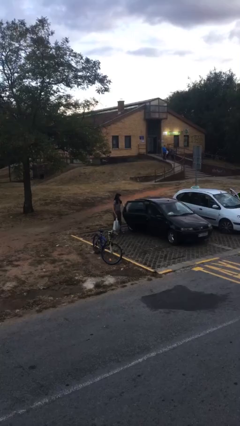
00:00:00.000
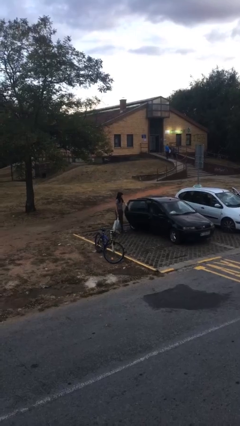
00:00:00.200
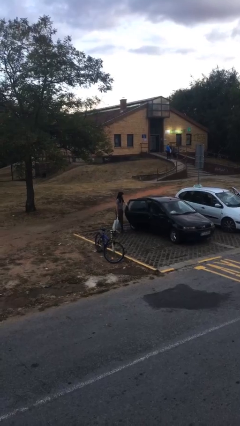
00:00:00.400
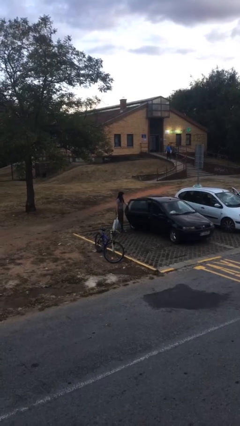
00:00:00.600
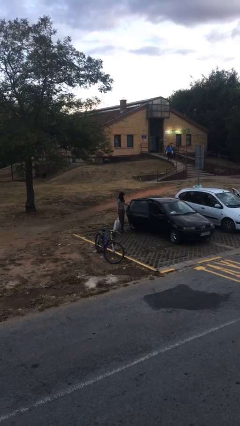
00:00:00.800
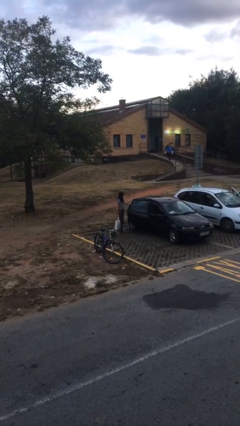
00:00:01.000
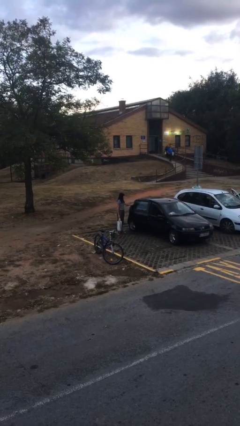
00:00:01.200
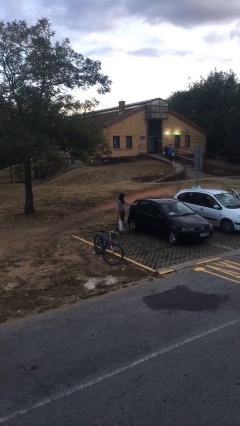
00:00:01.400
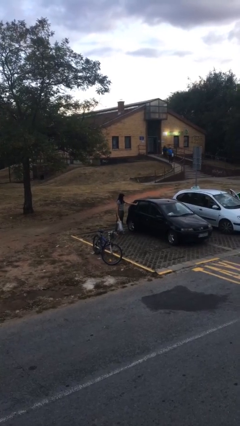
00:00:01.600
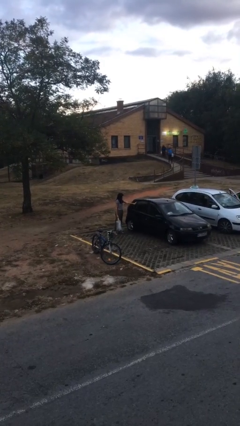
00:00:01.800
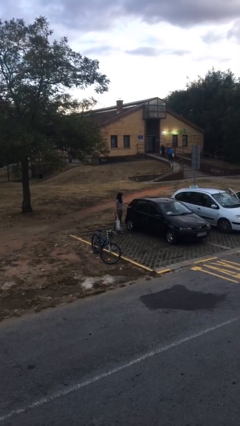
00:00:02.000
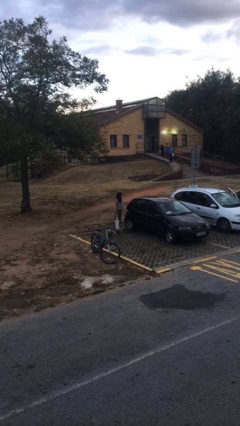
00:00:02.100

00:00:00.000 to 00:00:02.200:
person closes car door

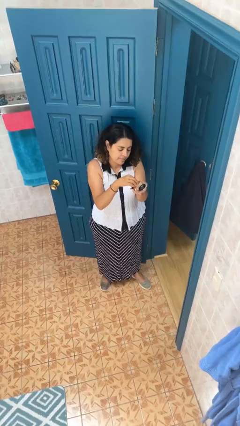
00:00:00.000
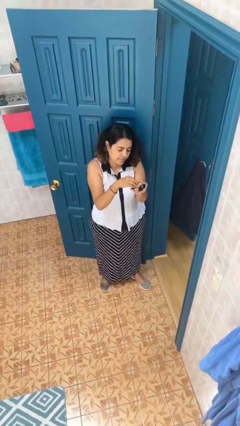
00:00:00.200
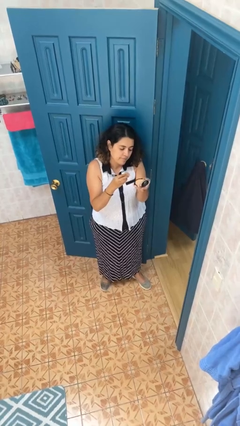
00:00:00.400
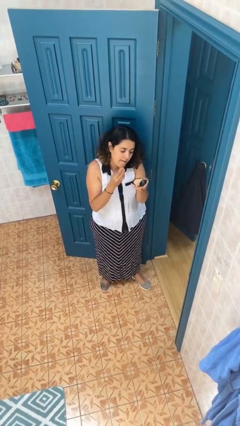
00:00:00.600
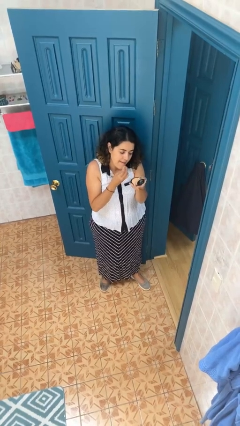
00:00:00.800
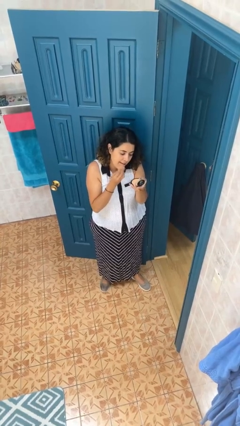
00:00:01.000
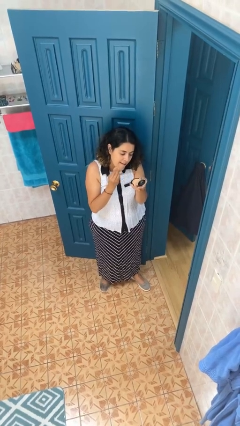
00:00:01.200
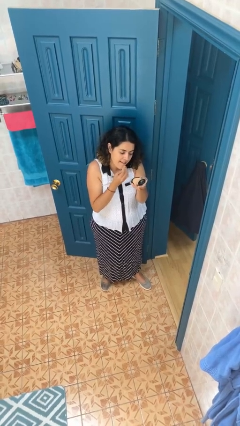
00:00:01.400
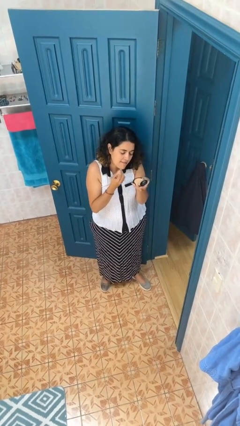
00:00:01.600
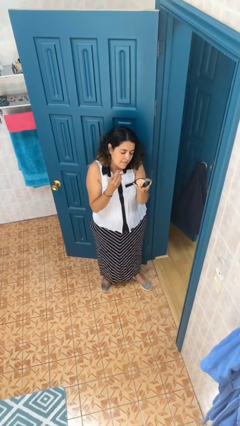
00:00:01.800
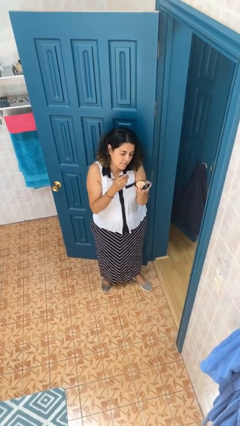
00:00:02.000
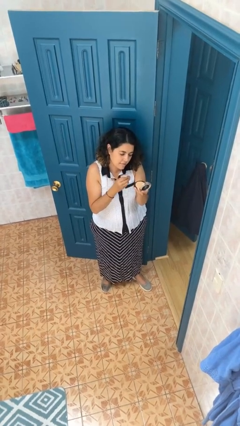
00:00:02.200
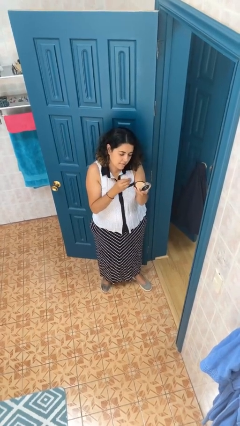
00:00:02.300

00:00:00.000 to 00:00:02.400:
person applies foundation makeup

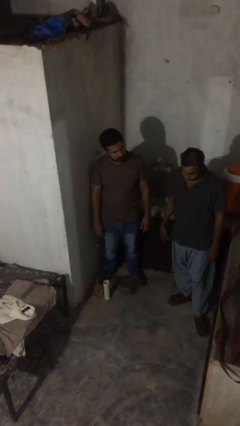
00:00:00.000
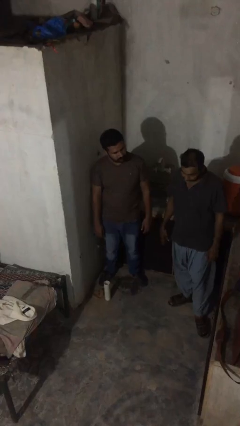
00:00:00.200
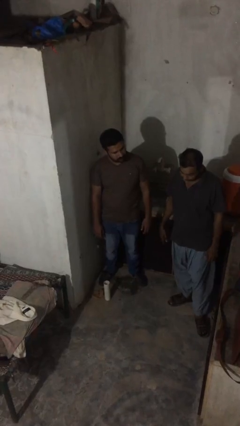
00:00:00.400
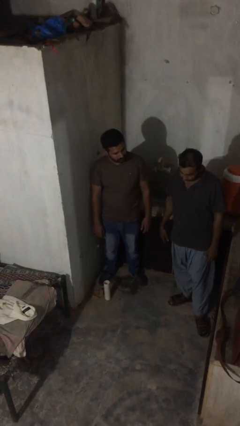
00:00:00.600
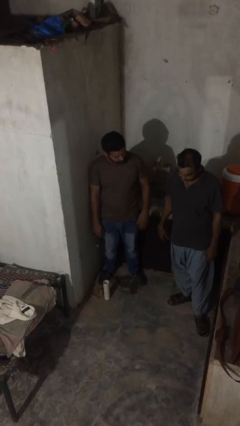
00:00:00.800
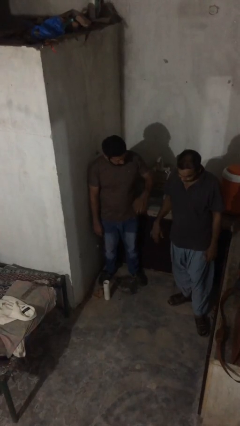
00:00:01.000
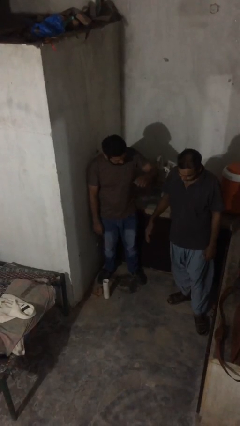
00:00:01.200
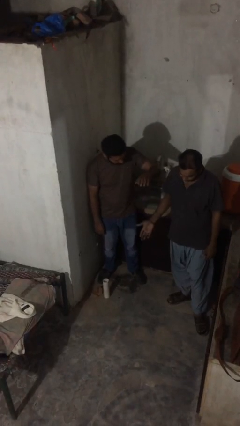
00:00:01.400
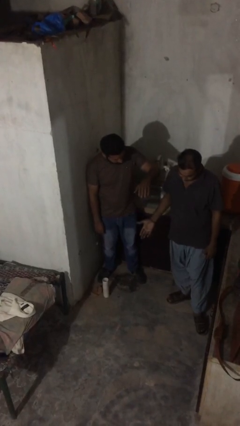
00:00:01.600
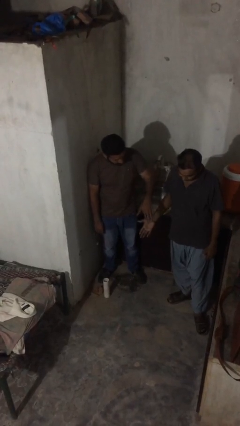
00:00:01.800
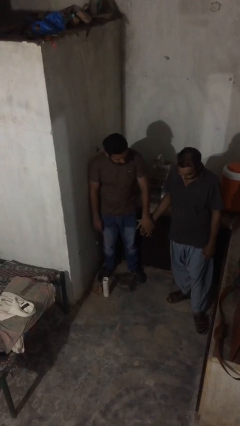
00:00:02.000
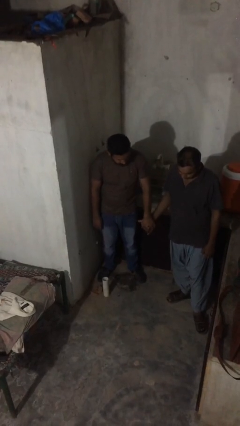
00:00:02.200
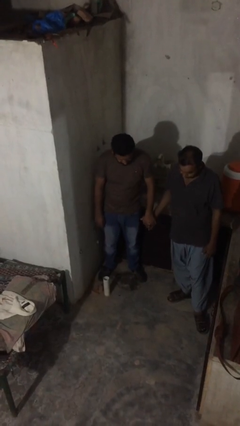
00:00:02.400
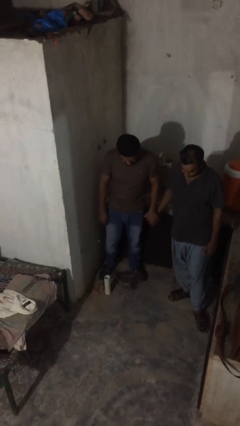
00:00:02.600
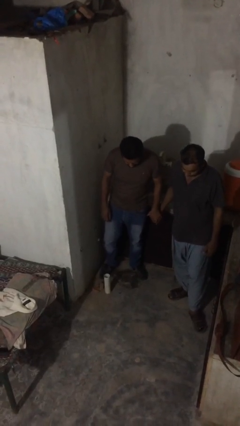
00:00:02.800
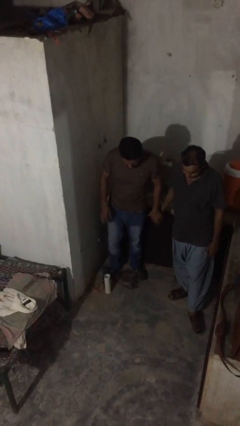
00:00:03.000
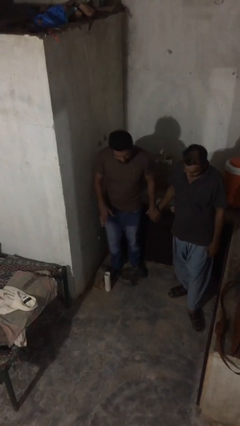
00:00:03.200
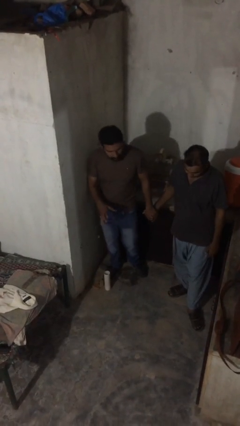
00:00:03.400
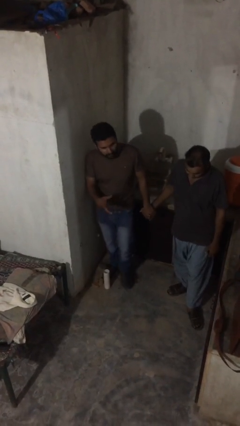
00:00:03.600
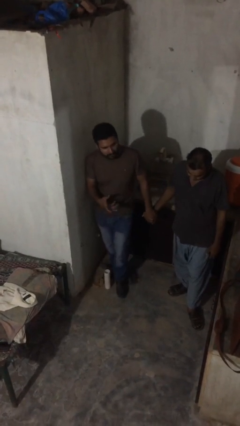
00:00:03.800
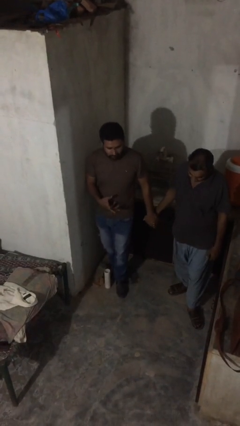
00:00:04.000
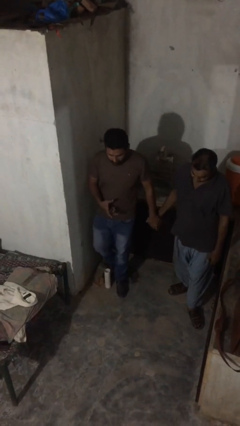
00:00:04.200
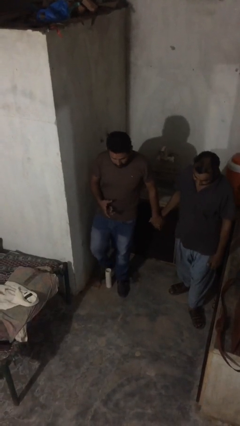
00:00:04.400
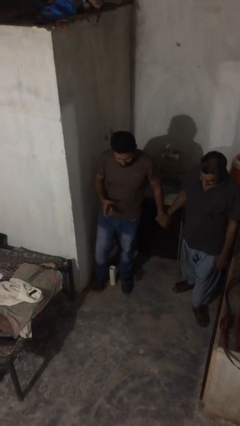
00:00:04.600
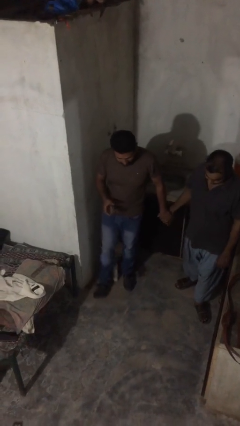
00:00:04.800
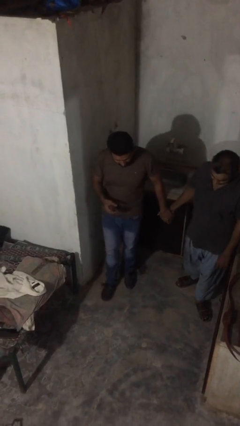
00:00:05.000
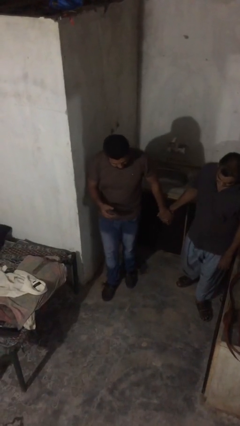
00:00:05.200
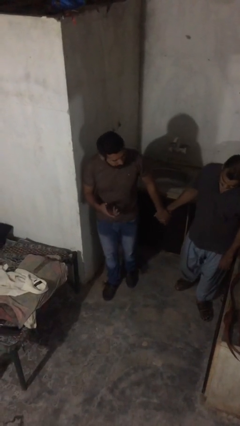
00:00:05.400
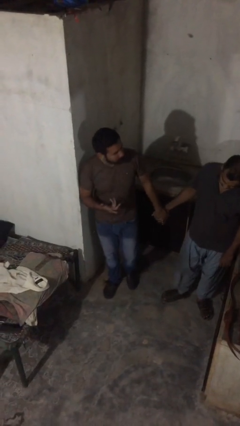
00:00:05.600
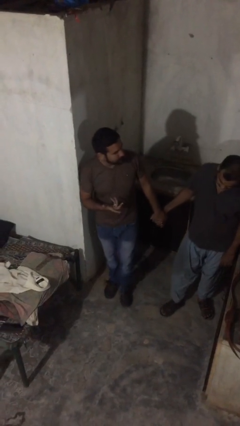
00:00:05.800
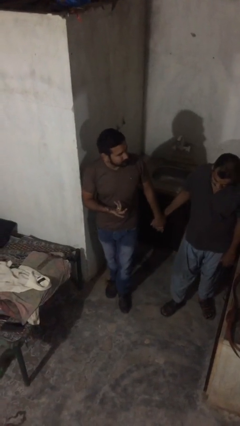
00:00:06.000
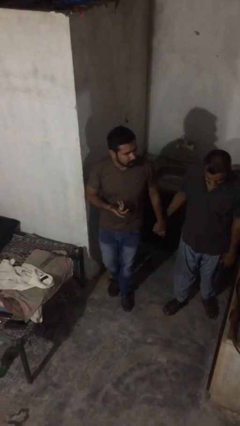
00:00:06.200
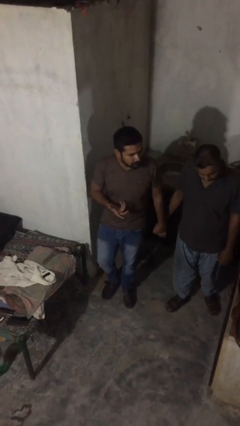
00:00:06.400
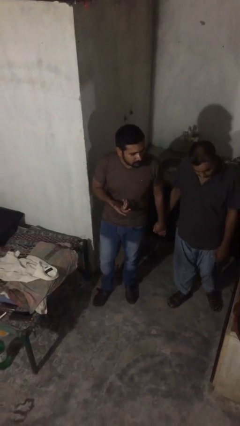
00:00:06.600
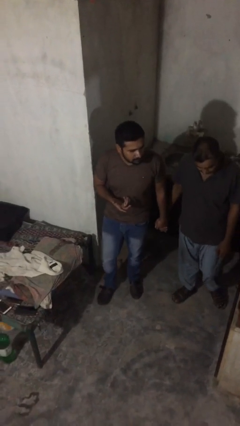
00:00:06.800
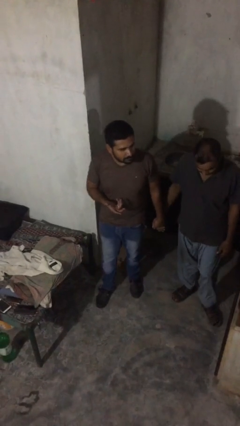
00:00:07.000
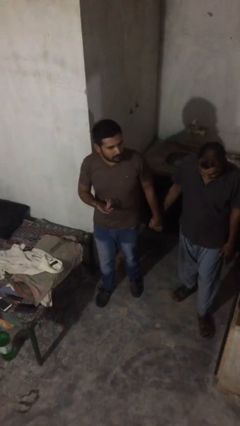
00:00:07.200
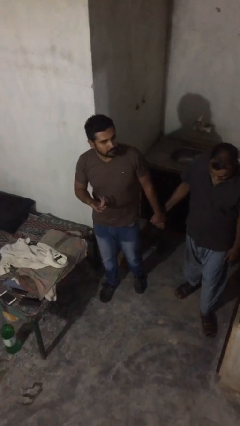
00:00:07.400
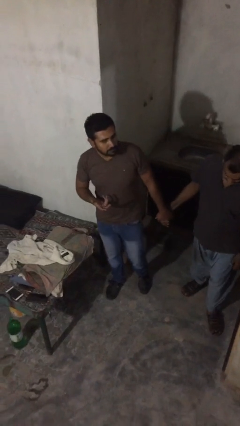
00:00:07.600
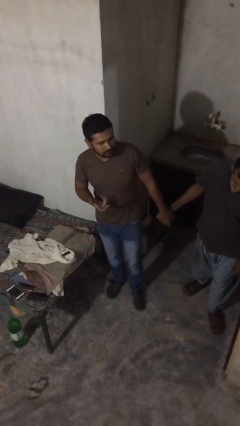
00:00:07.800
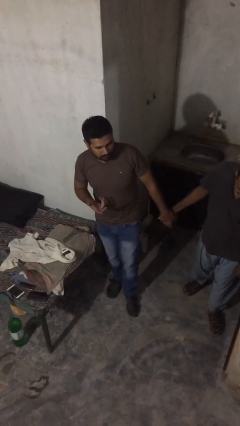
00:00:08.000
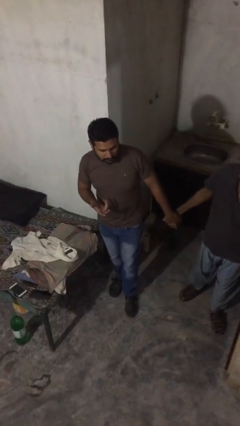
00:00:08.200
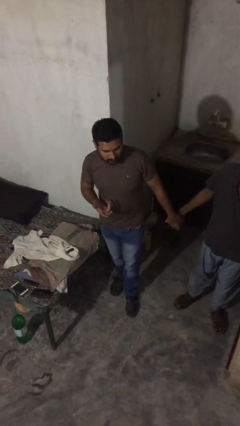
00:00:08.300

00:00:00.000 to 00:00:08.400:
person holds hand

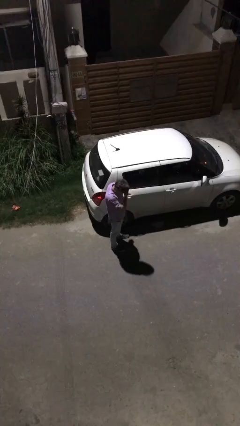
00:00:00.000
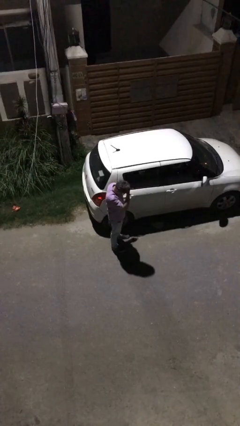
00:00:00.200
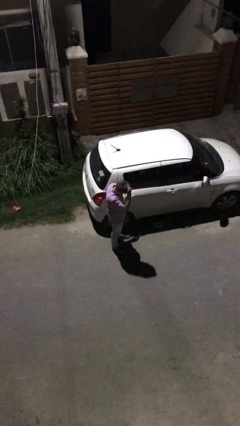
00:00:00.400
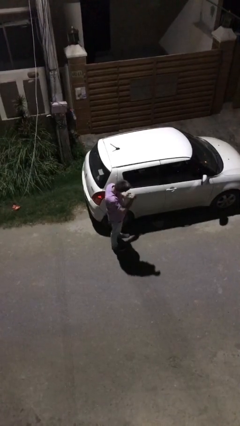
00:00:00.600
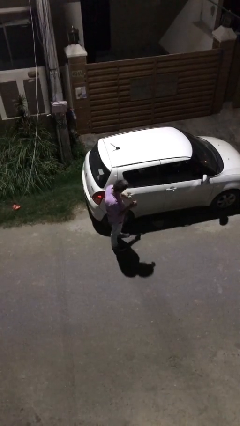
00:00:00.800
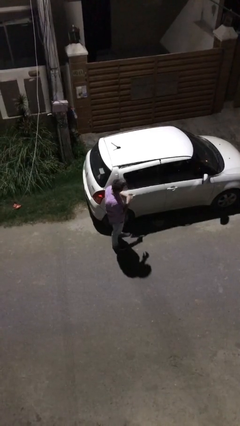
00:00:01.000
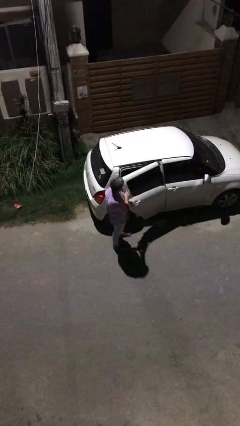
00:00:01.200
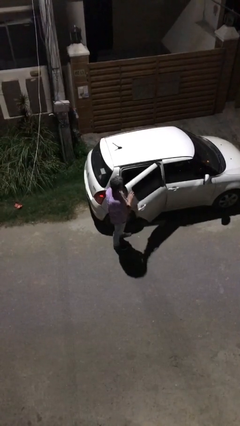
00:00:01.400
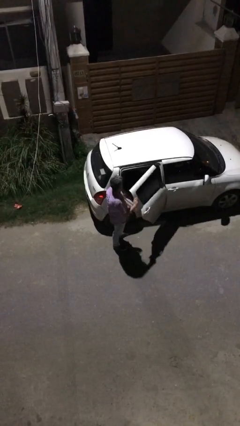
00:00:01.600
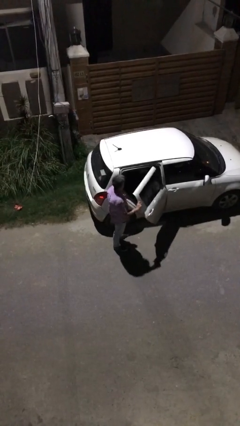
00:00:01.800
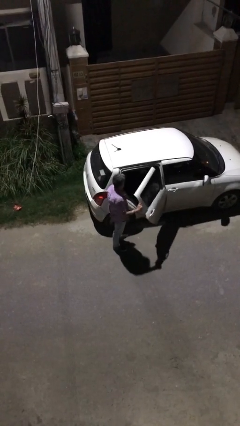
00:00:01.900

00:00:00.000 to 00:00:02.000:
person opens car door

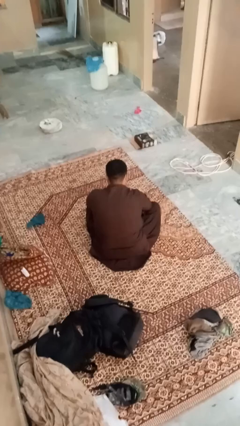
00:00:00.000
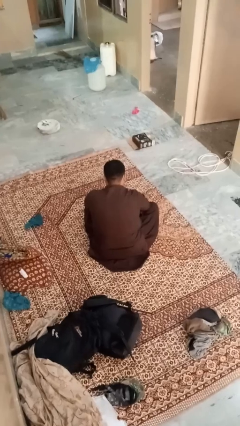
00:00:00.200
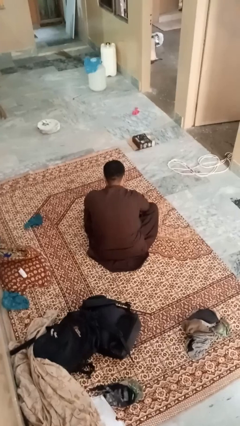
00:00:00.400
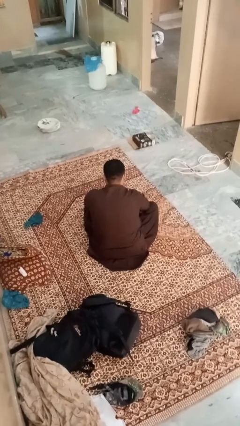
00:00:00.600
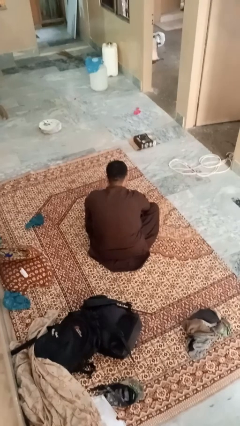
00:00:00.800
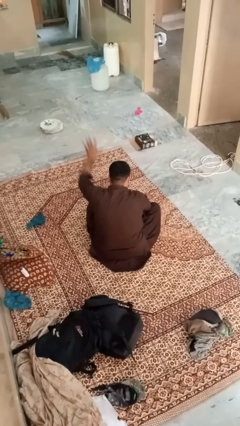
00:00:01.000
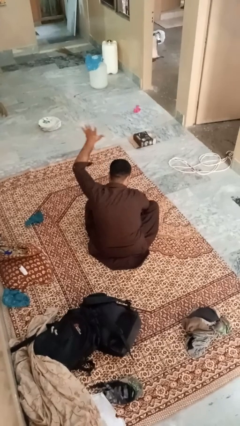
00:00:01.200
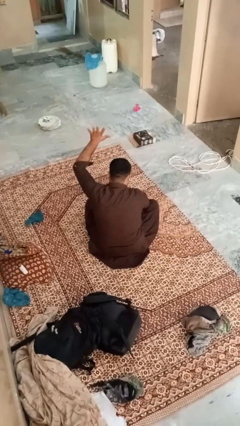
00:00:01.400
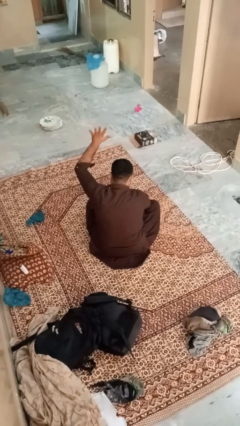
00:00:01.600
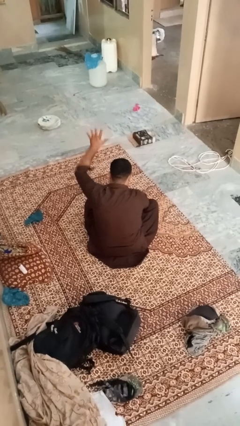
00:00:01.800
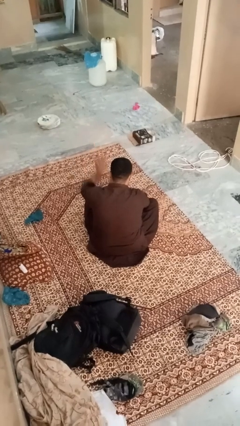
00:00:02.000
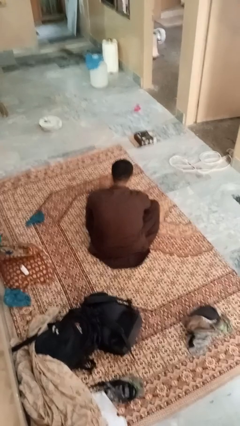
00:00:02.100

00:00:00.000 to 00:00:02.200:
person gestures number five
